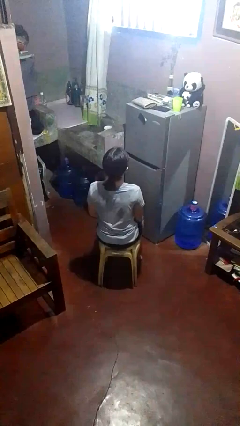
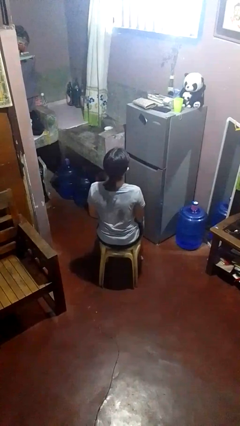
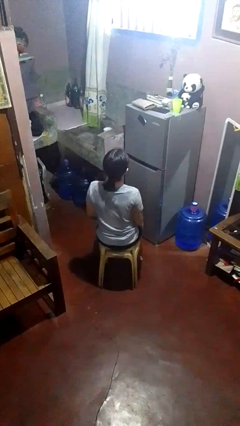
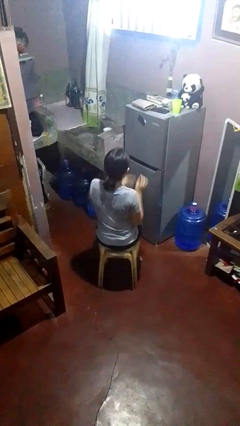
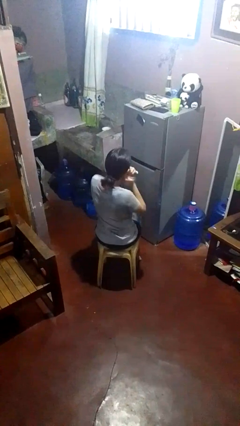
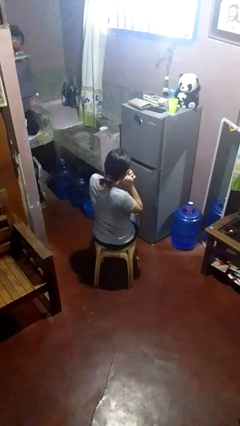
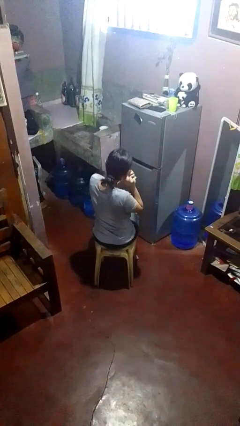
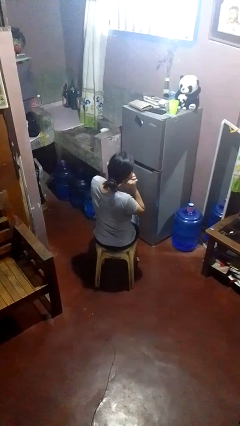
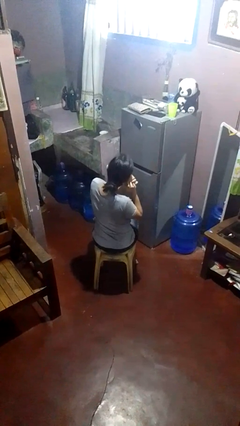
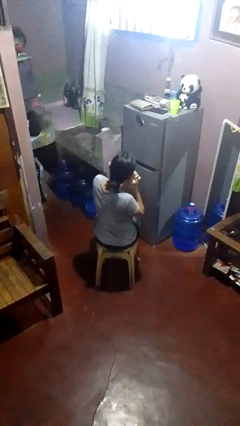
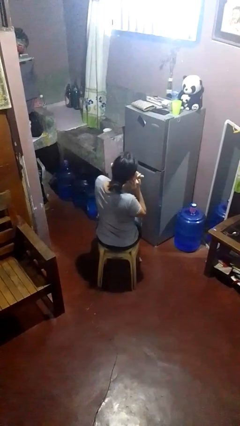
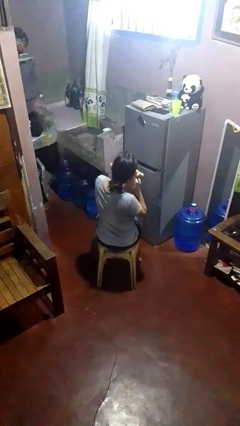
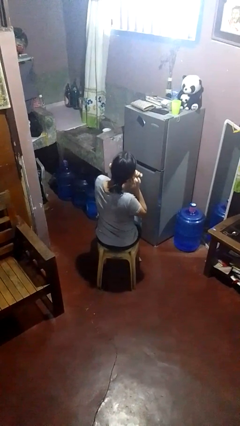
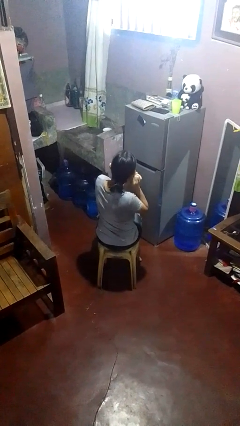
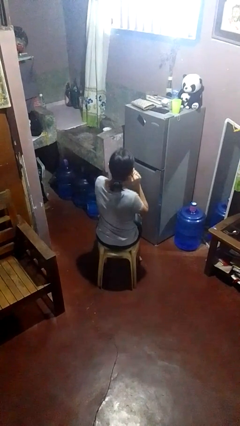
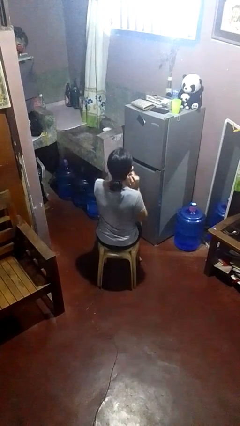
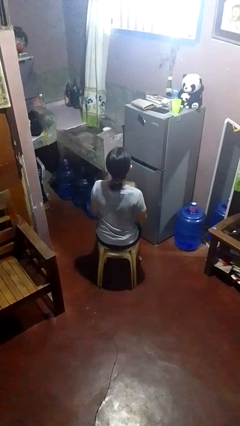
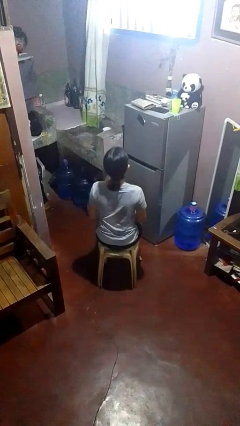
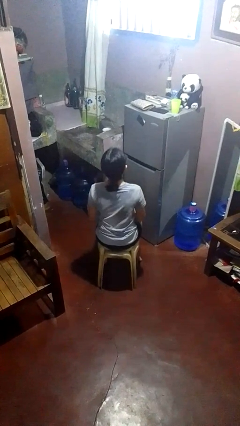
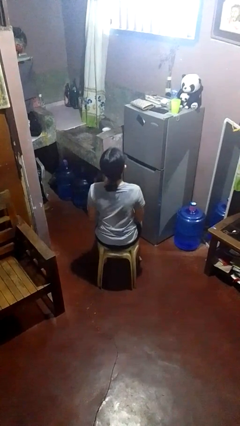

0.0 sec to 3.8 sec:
person takes off earrings

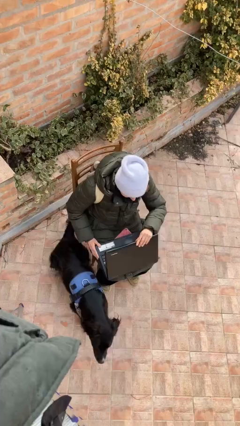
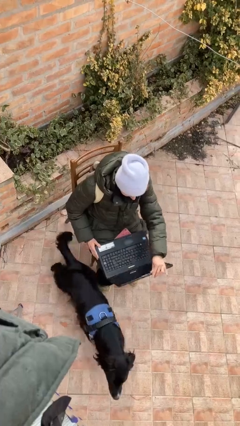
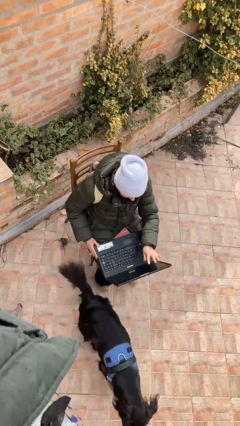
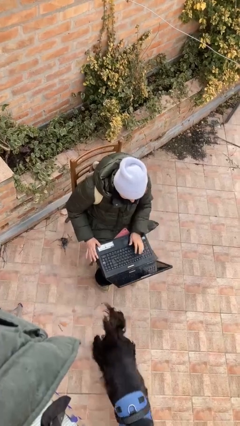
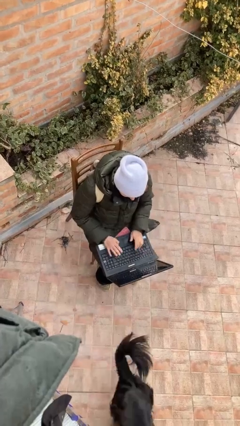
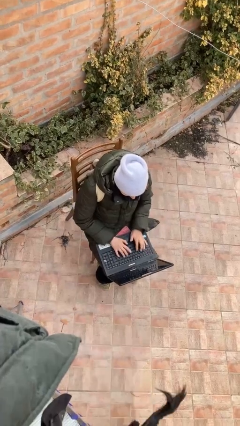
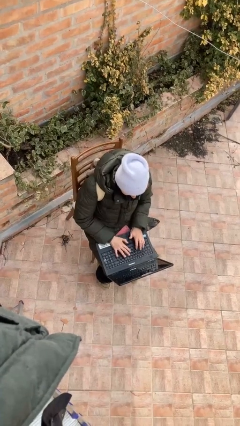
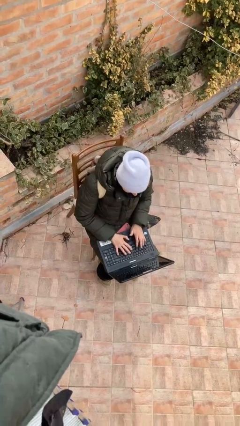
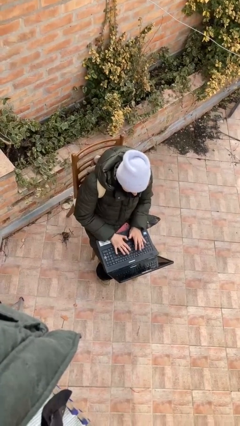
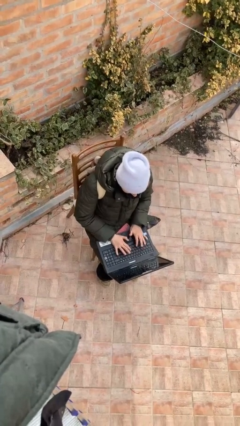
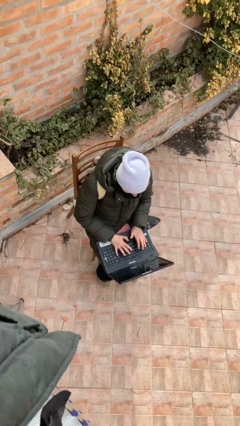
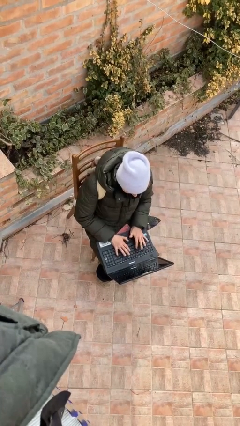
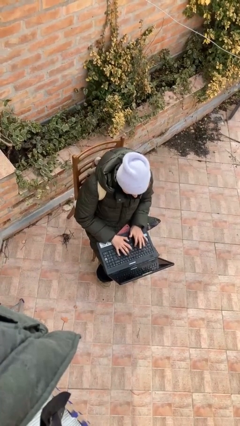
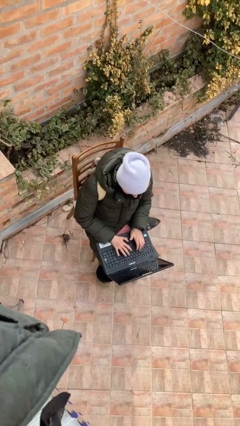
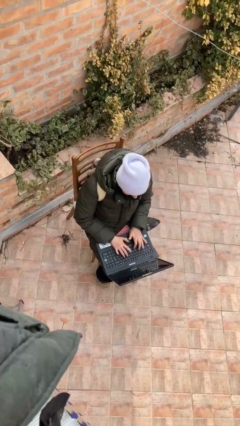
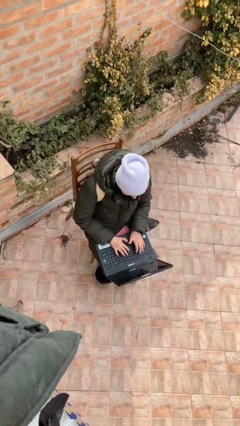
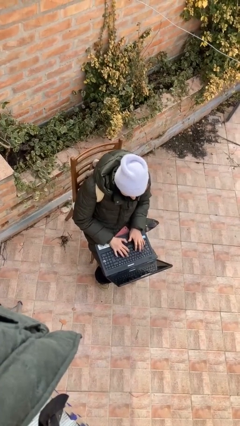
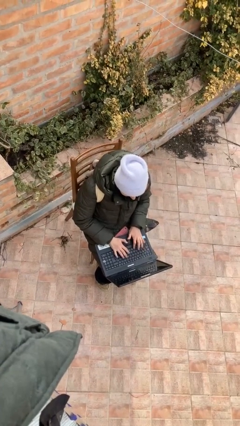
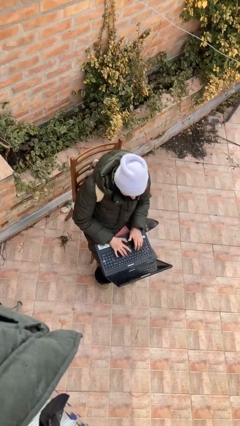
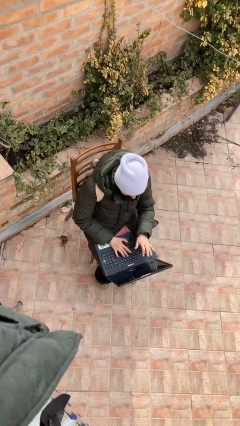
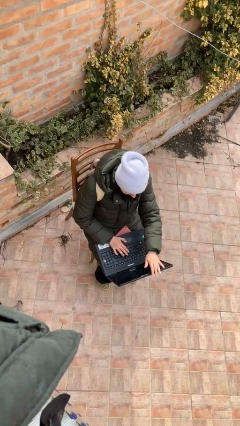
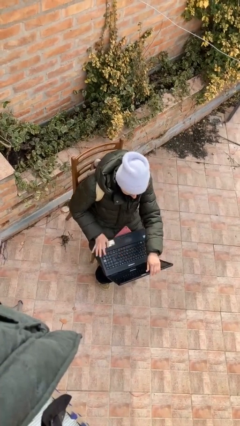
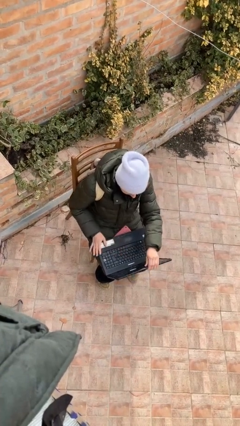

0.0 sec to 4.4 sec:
person interacts with laptop

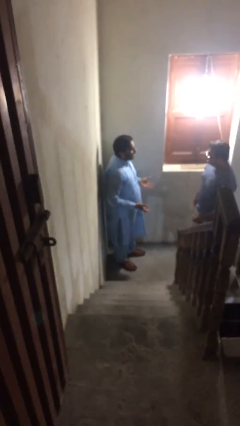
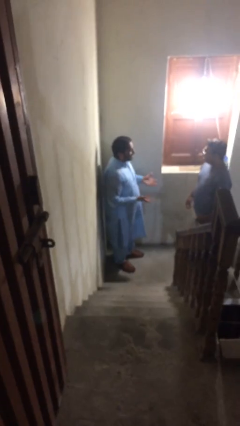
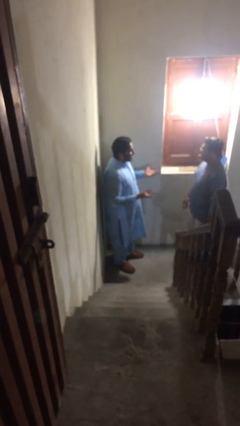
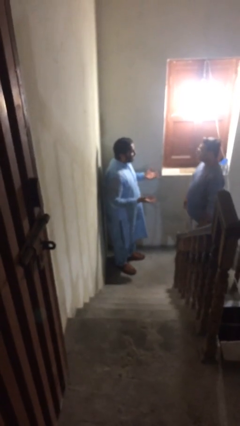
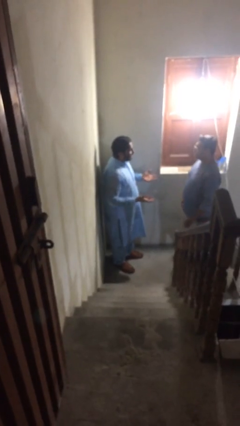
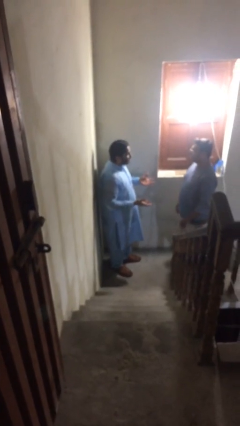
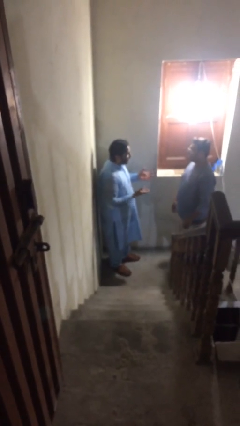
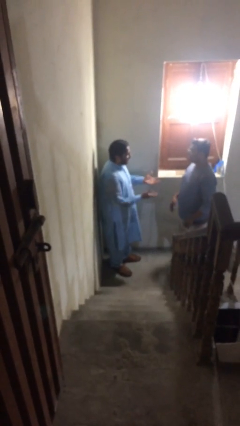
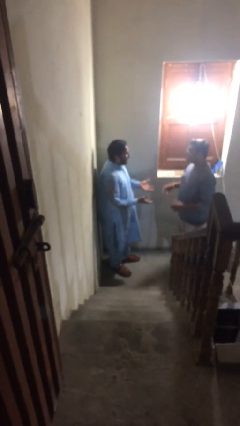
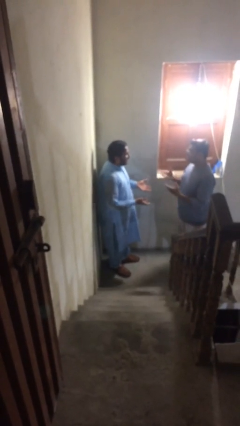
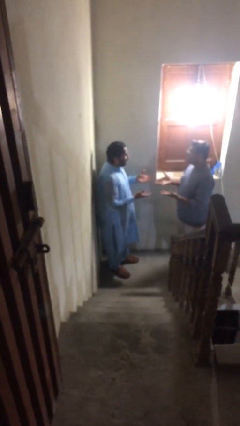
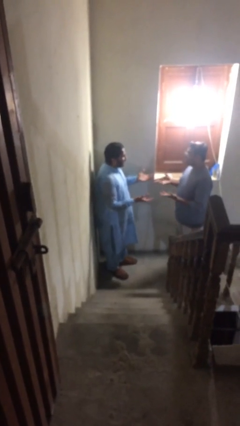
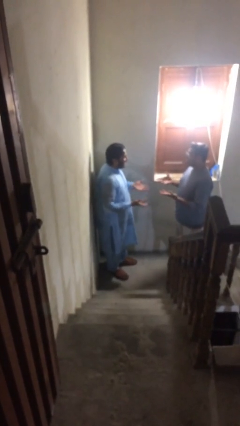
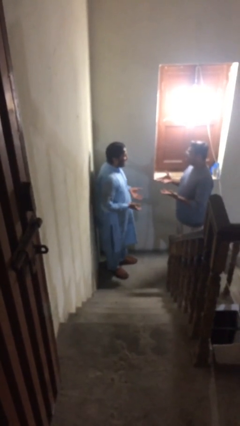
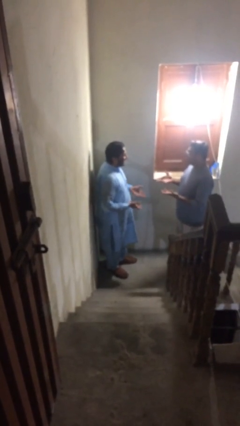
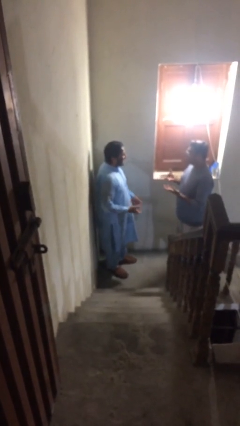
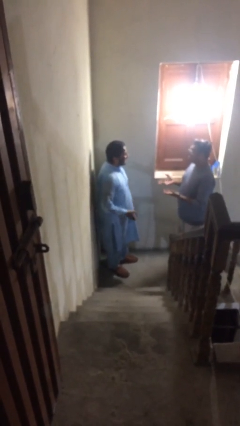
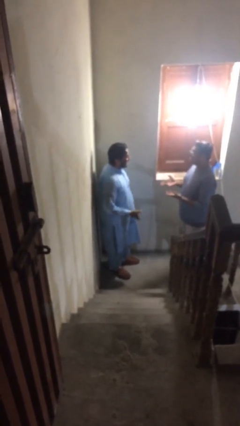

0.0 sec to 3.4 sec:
person talks to person

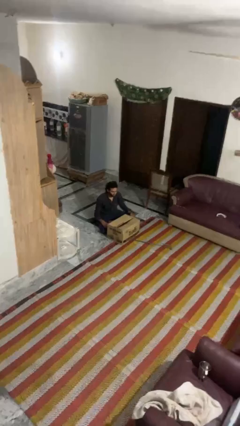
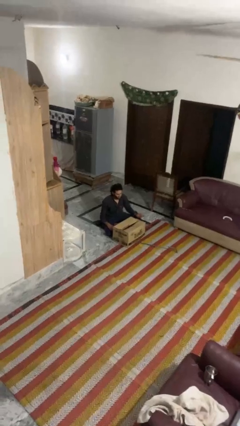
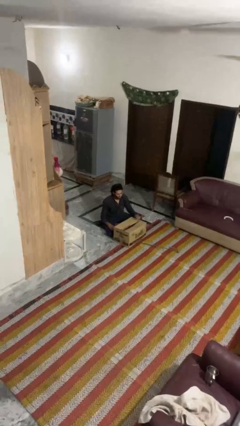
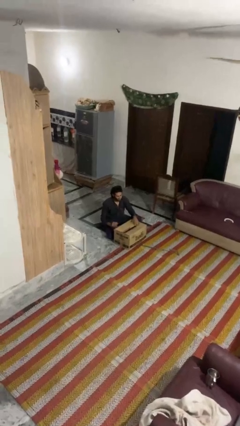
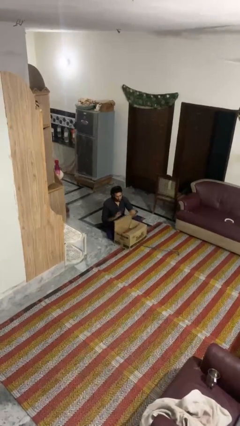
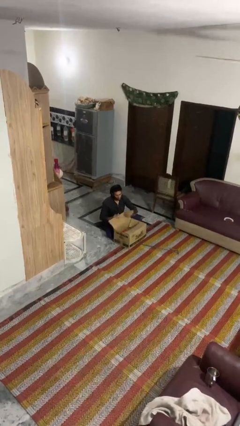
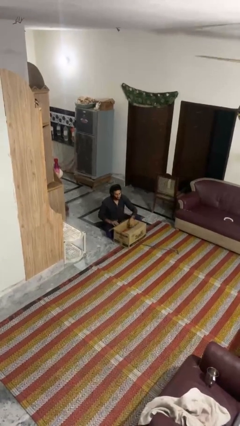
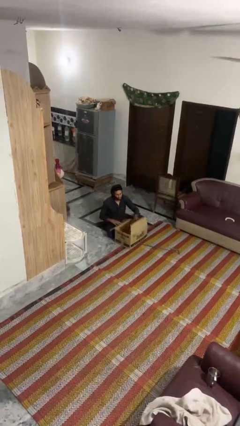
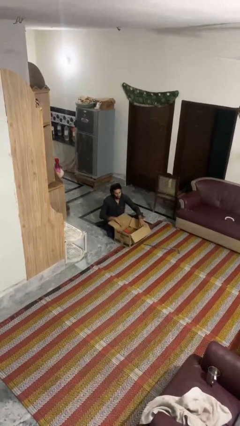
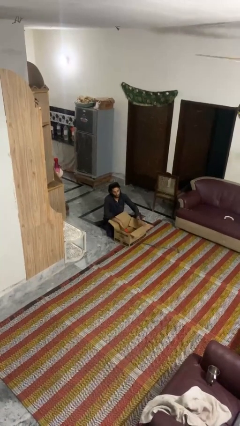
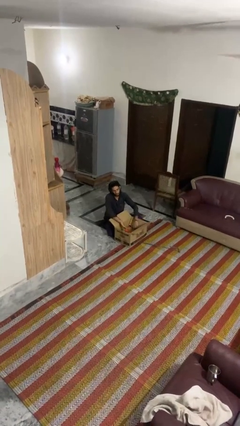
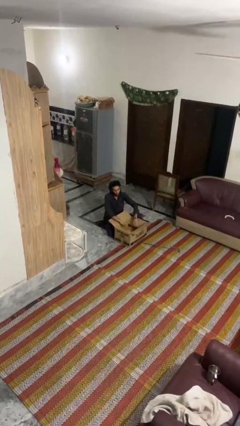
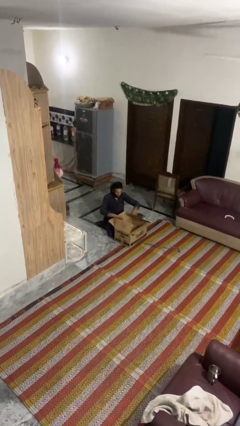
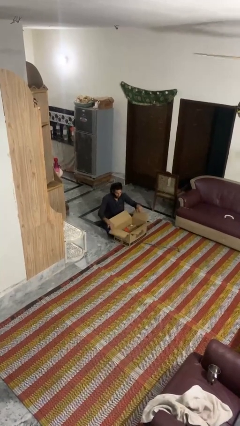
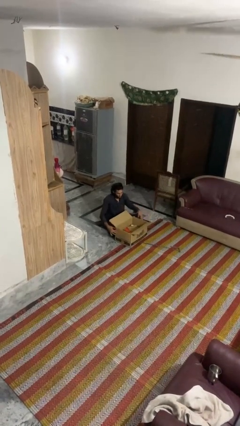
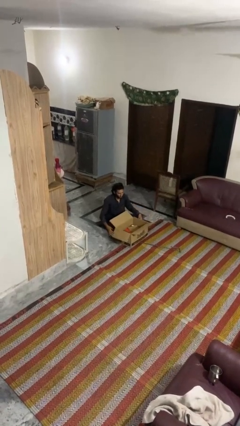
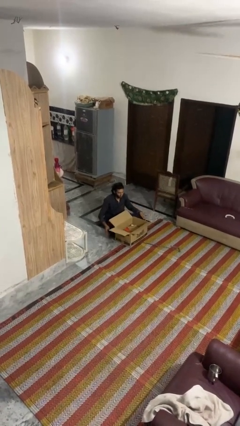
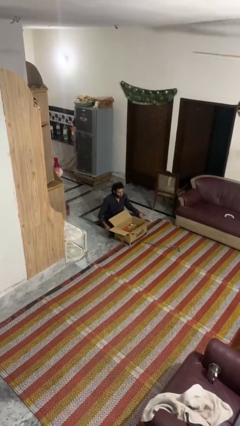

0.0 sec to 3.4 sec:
person opens box

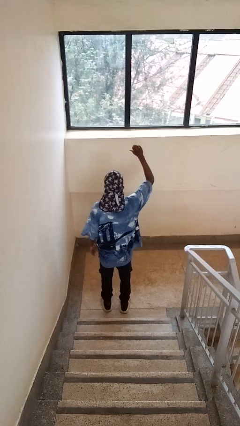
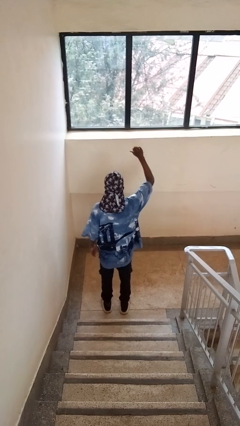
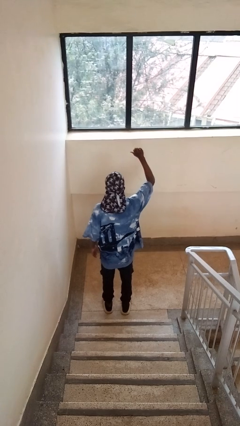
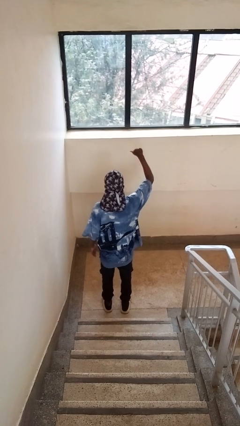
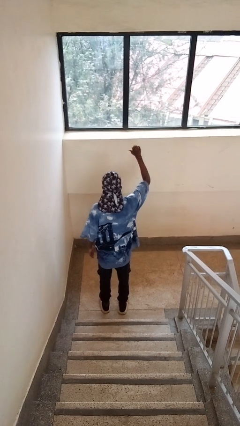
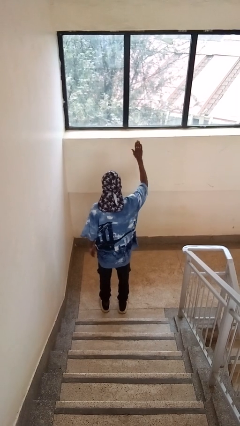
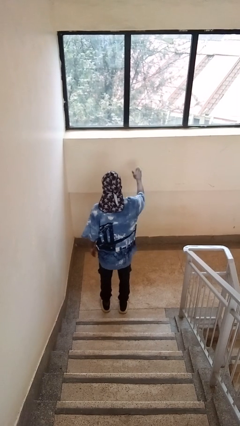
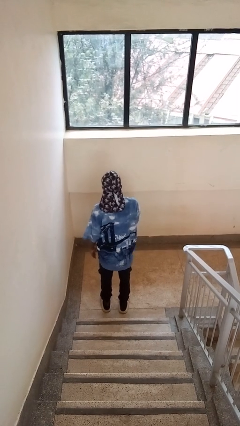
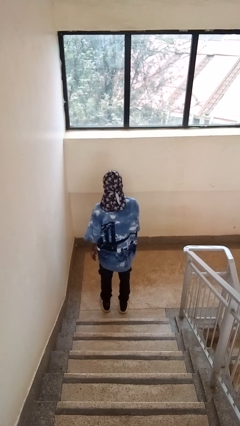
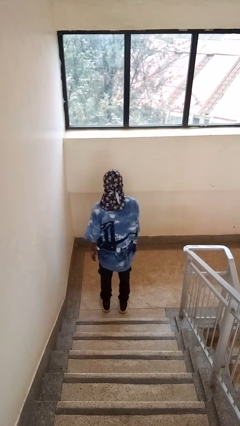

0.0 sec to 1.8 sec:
person gestures swipe down

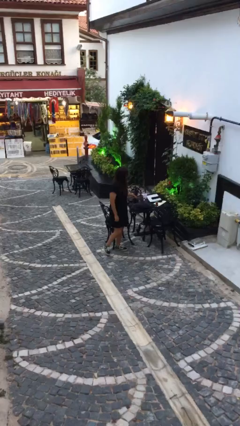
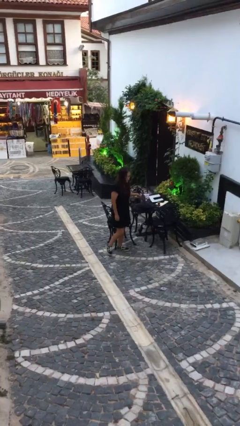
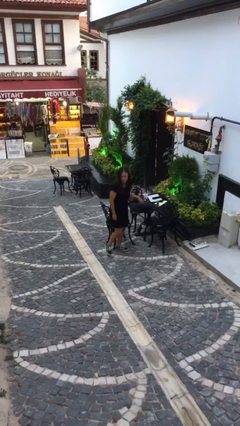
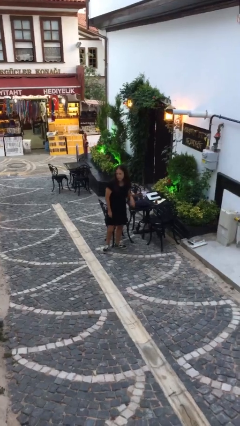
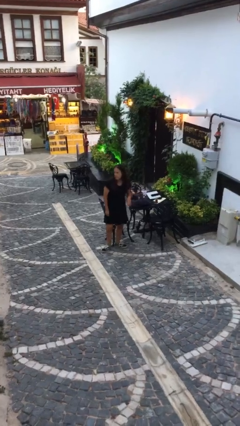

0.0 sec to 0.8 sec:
person puts down object on table
